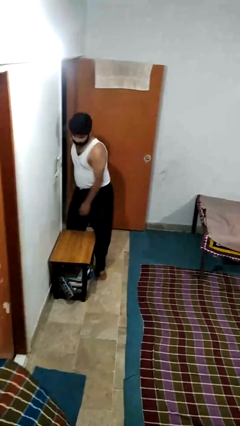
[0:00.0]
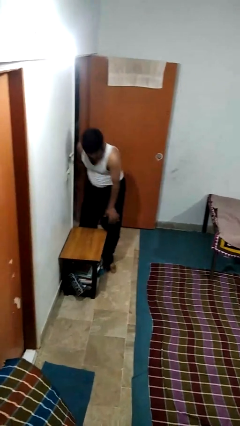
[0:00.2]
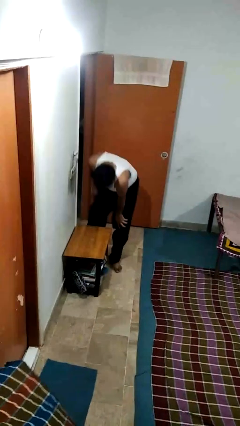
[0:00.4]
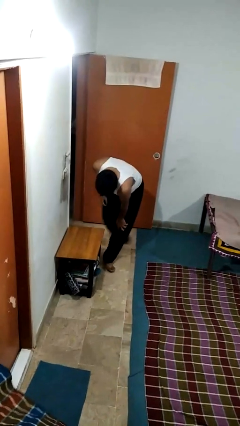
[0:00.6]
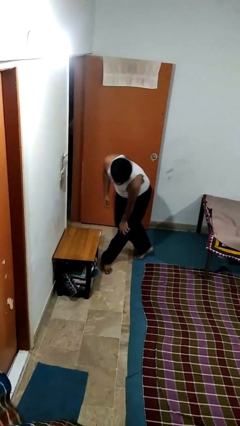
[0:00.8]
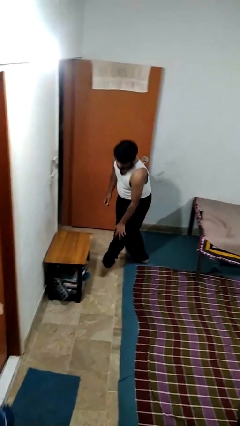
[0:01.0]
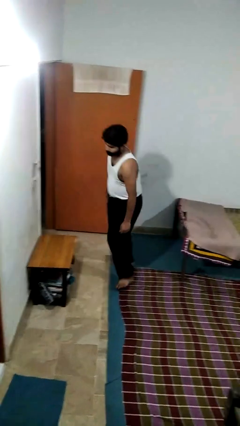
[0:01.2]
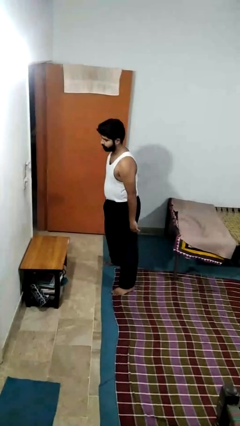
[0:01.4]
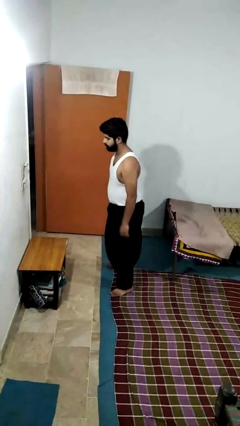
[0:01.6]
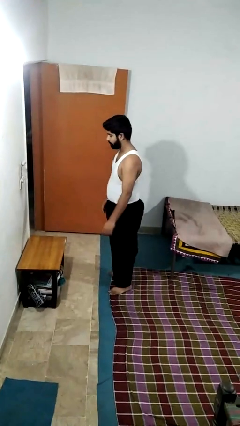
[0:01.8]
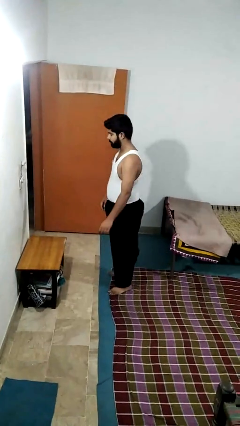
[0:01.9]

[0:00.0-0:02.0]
person bumps into table

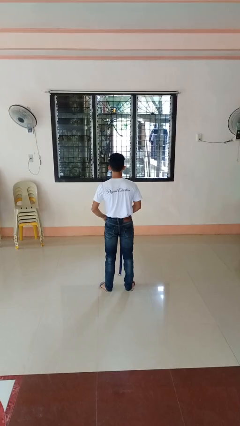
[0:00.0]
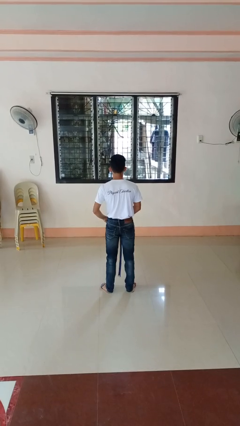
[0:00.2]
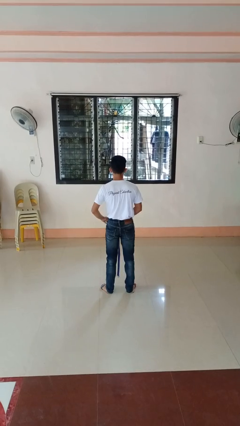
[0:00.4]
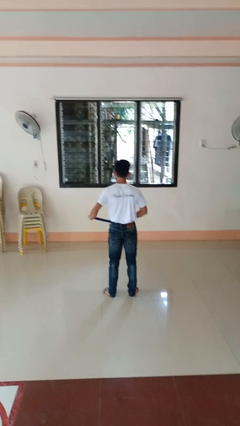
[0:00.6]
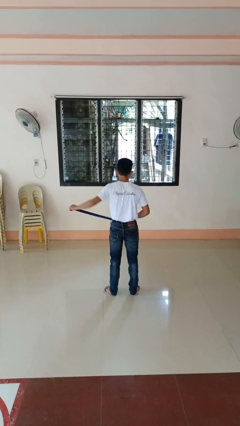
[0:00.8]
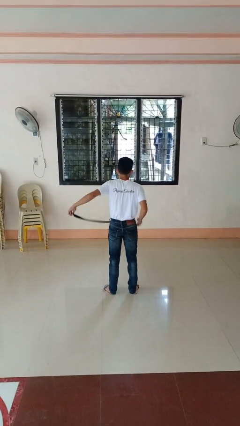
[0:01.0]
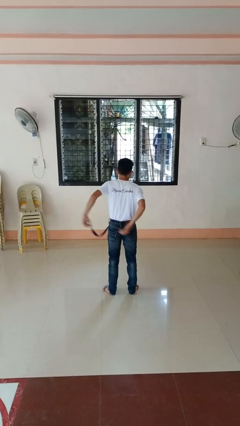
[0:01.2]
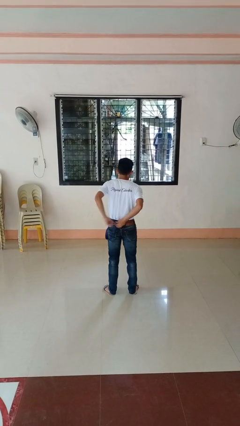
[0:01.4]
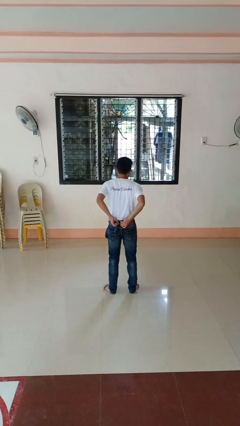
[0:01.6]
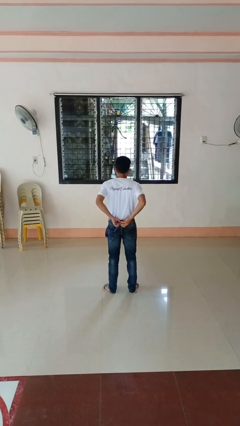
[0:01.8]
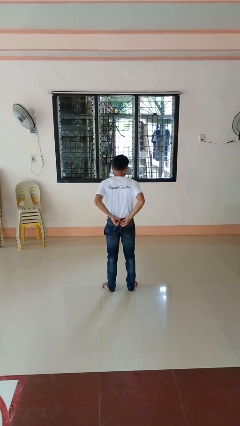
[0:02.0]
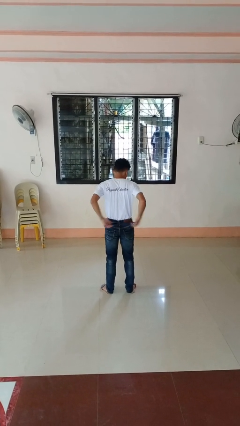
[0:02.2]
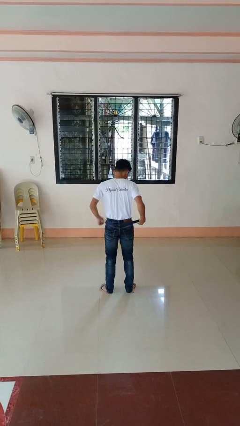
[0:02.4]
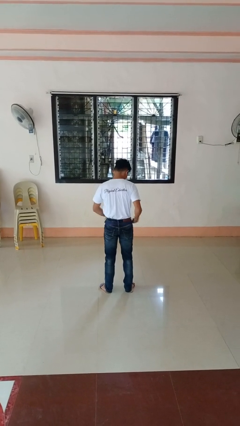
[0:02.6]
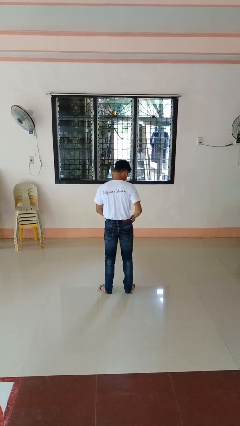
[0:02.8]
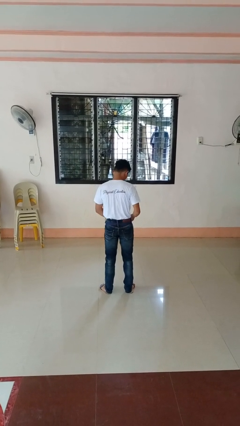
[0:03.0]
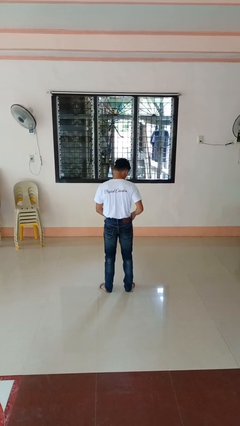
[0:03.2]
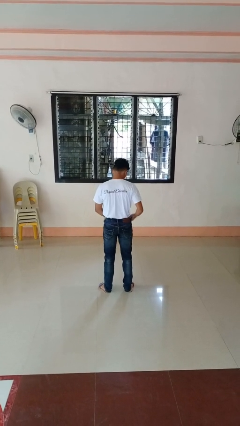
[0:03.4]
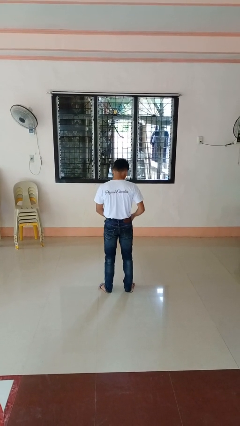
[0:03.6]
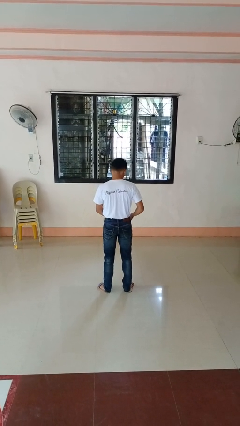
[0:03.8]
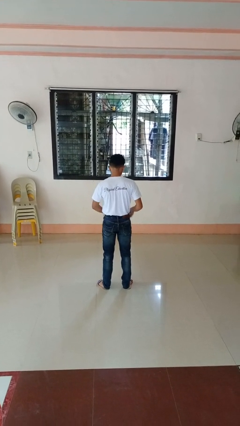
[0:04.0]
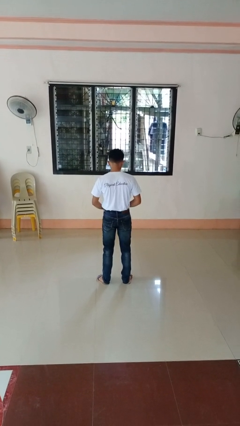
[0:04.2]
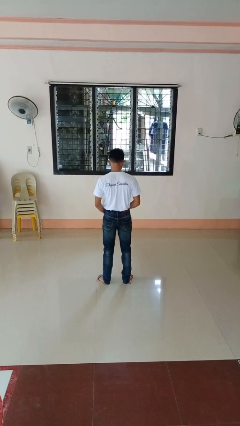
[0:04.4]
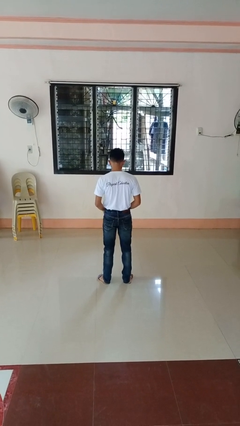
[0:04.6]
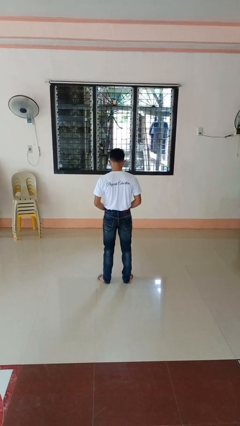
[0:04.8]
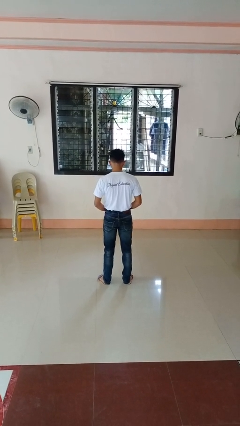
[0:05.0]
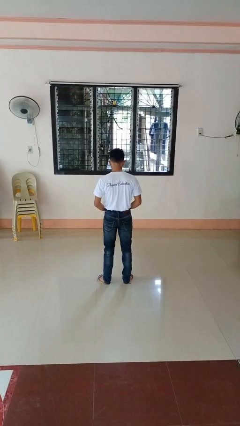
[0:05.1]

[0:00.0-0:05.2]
person puts on belt

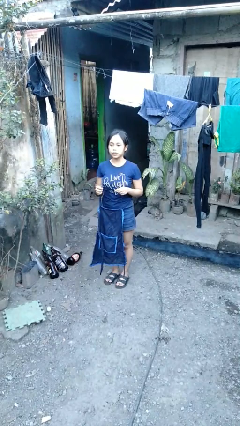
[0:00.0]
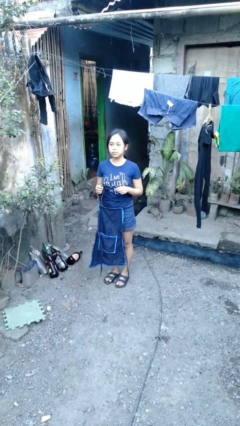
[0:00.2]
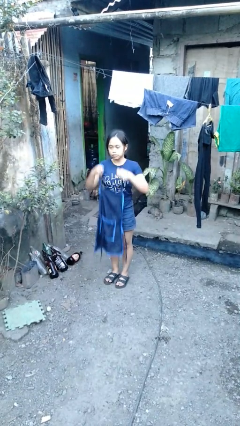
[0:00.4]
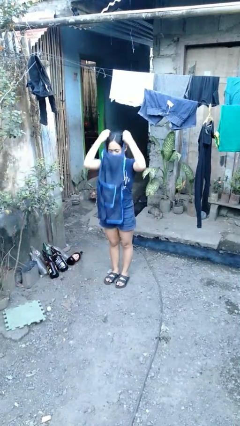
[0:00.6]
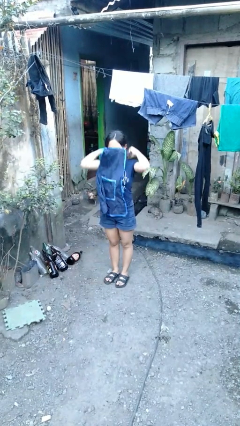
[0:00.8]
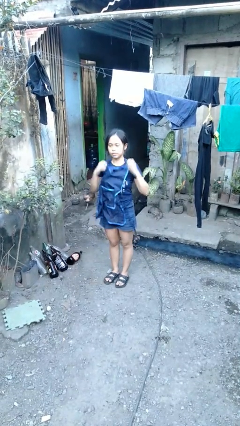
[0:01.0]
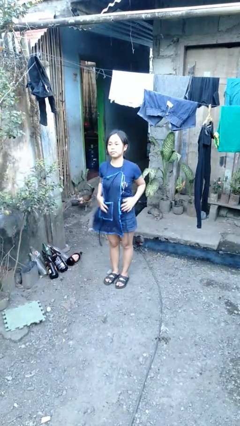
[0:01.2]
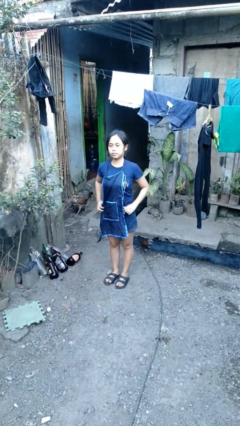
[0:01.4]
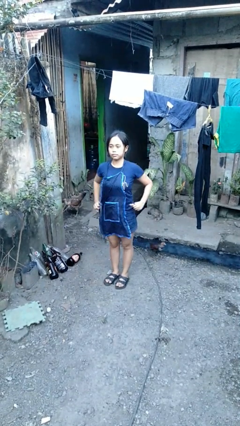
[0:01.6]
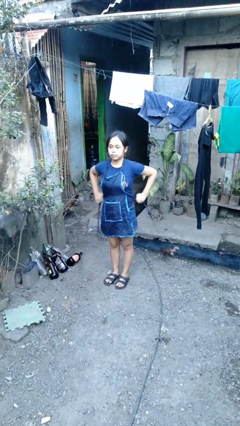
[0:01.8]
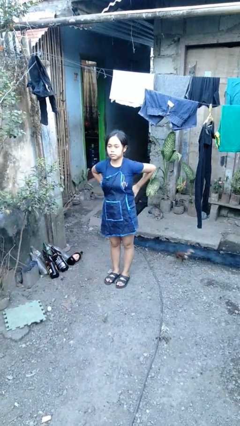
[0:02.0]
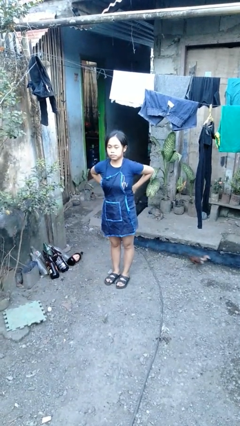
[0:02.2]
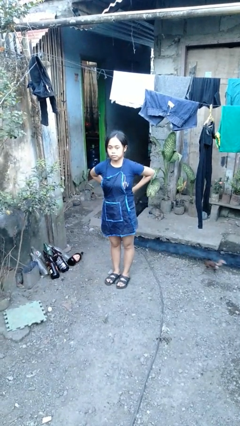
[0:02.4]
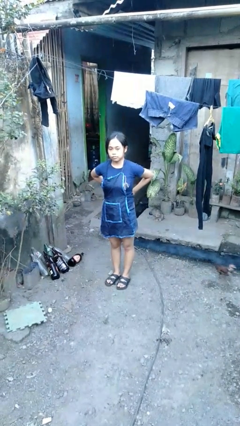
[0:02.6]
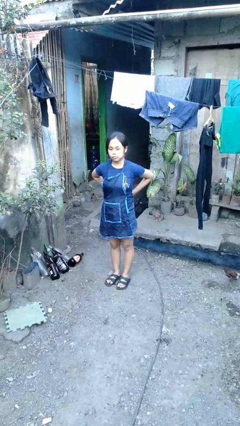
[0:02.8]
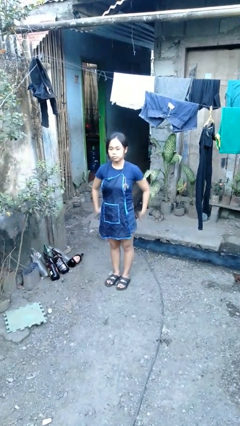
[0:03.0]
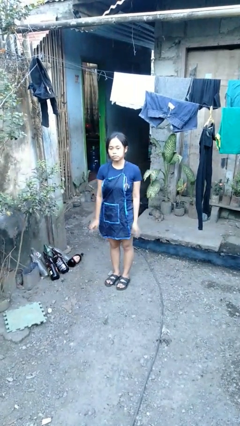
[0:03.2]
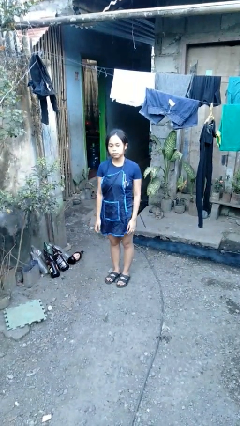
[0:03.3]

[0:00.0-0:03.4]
person puts on apron

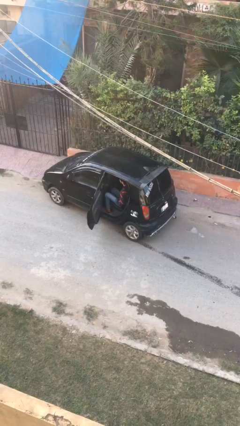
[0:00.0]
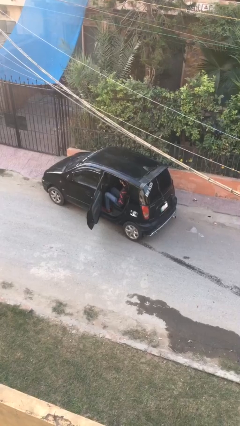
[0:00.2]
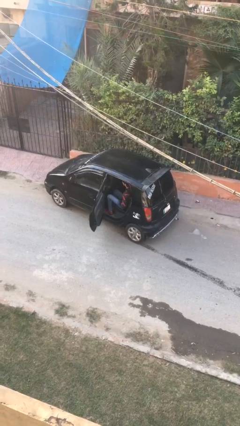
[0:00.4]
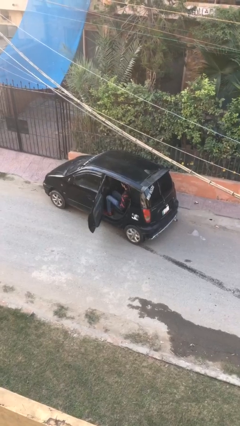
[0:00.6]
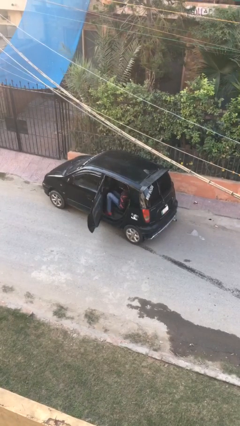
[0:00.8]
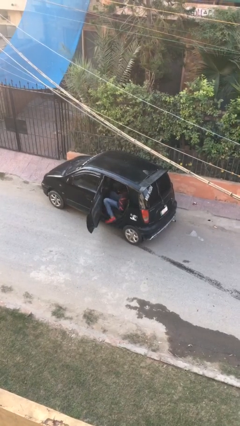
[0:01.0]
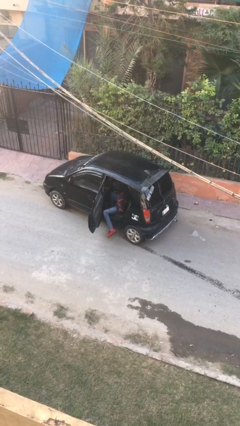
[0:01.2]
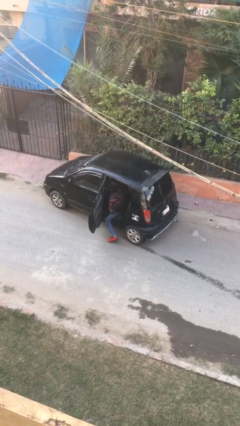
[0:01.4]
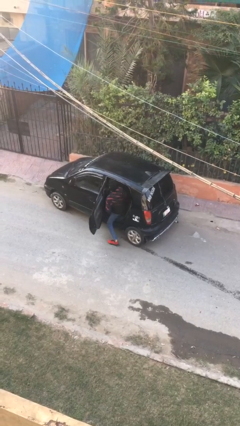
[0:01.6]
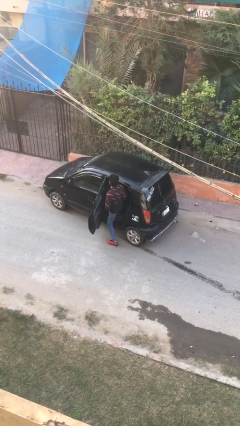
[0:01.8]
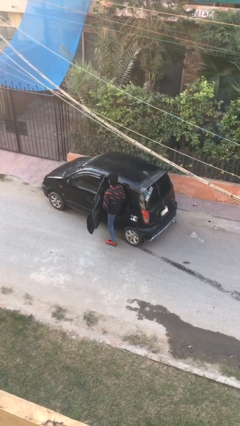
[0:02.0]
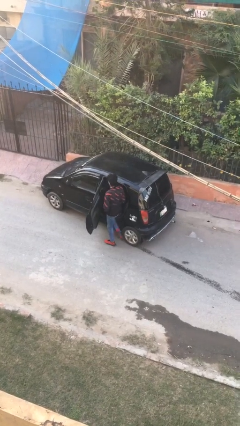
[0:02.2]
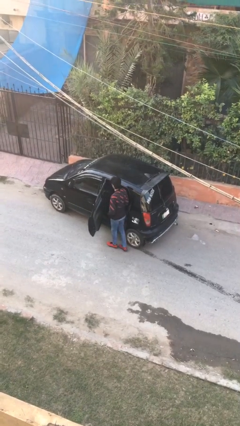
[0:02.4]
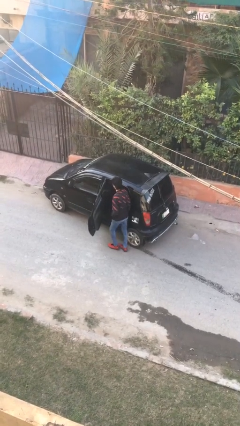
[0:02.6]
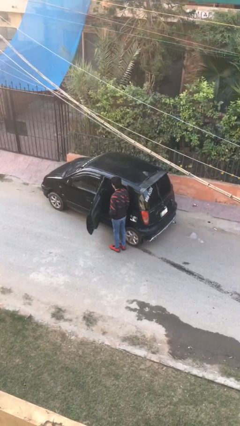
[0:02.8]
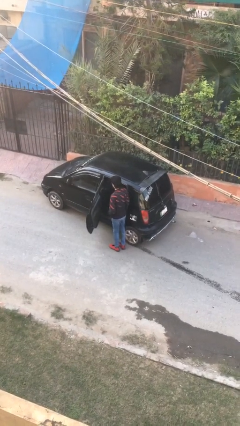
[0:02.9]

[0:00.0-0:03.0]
person exits car

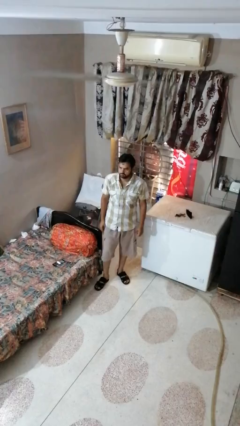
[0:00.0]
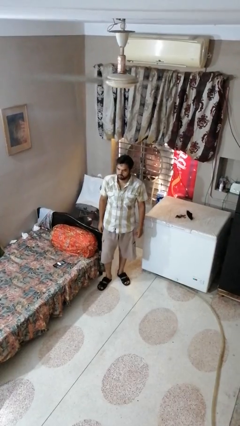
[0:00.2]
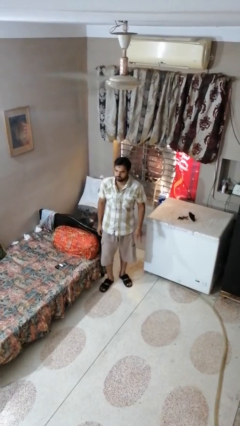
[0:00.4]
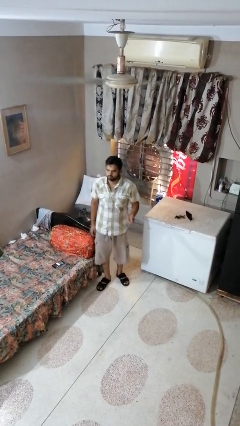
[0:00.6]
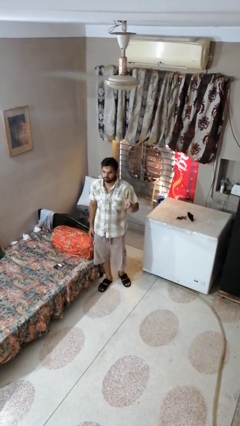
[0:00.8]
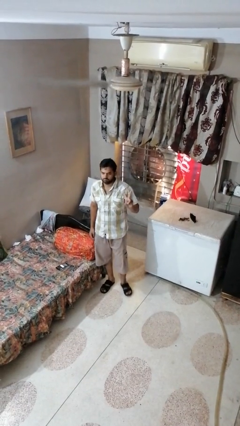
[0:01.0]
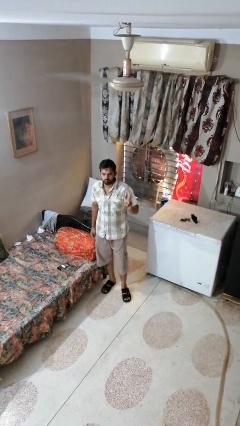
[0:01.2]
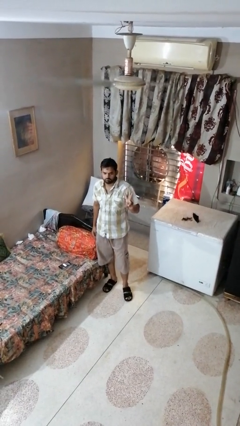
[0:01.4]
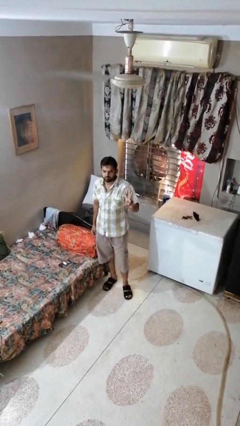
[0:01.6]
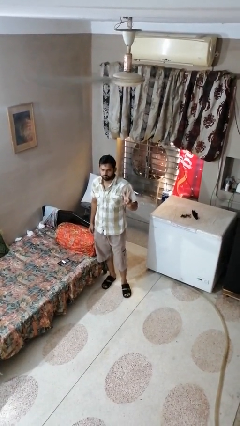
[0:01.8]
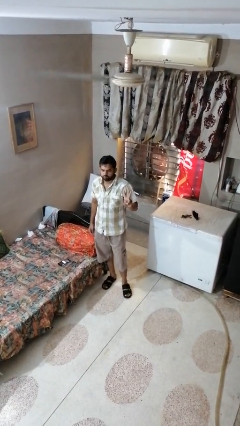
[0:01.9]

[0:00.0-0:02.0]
person gestures peace

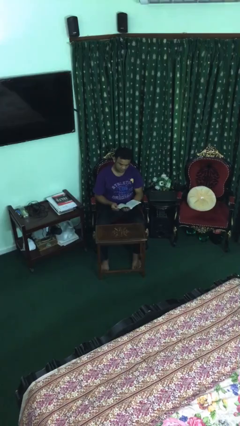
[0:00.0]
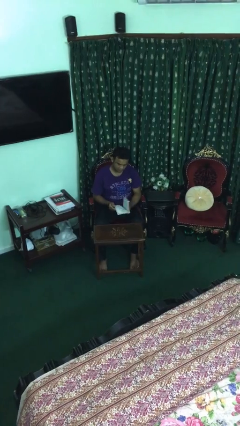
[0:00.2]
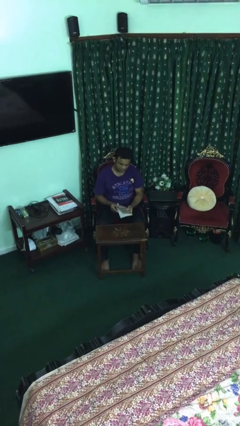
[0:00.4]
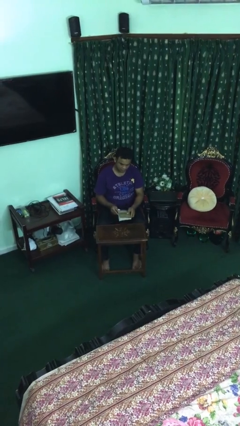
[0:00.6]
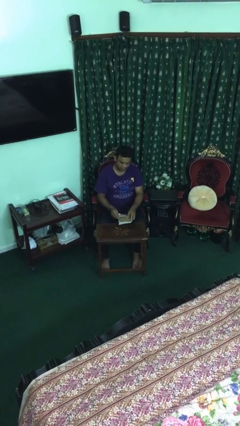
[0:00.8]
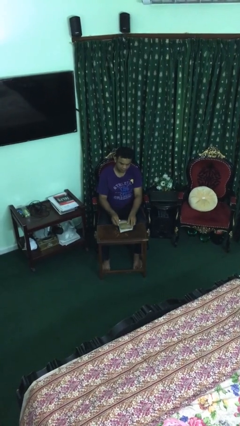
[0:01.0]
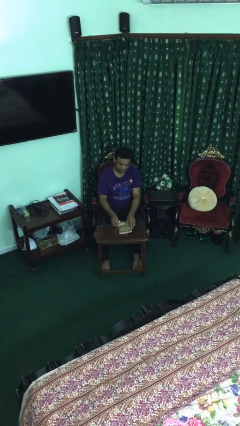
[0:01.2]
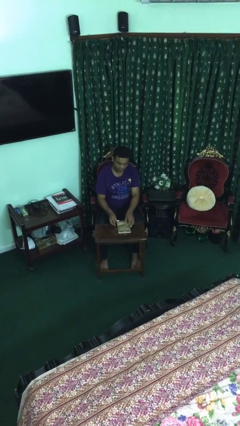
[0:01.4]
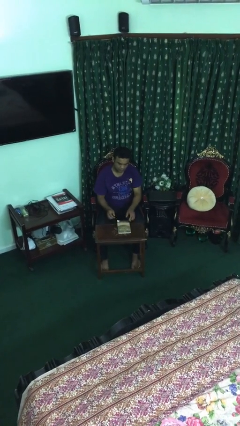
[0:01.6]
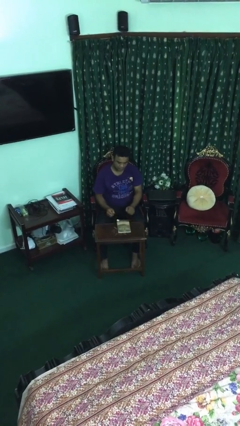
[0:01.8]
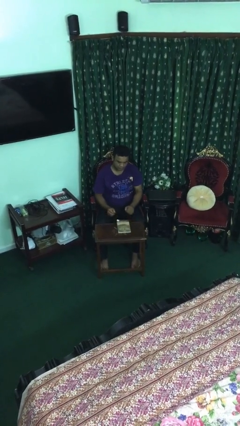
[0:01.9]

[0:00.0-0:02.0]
person puts down object on table
